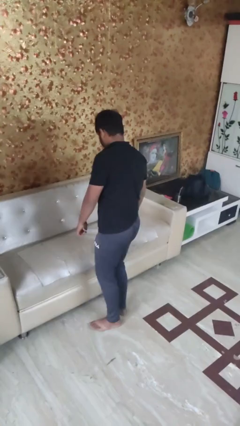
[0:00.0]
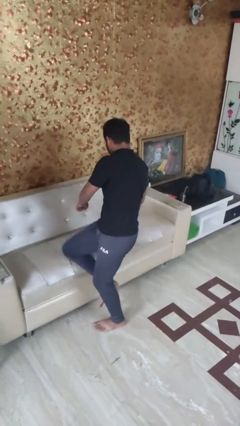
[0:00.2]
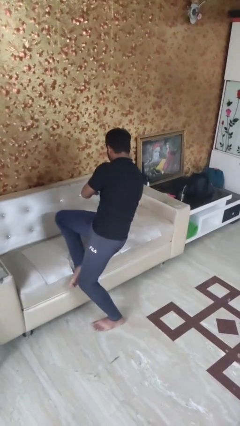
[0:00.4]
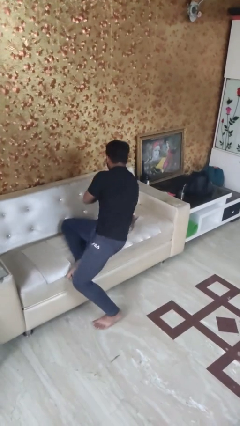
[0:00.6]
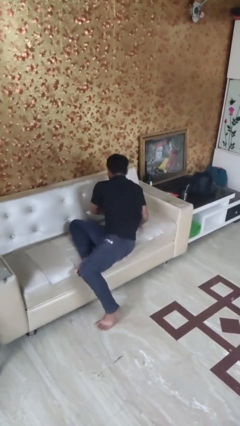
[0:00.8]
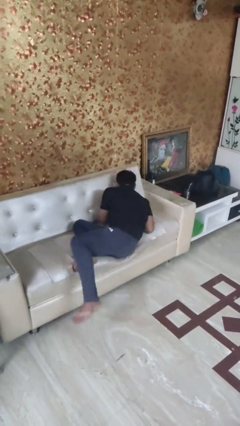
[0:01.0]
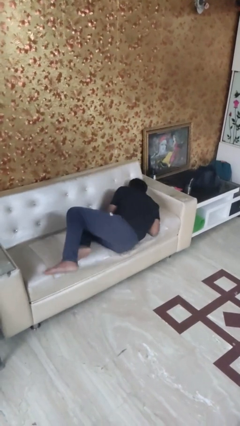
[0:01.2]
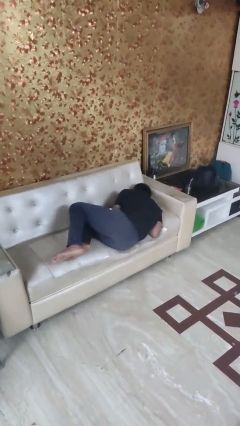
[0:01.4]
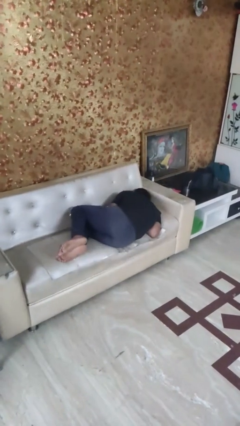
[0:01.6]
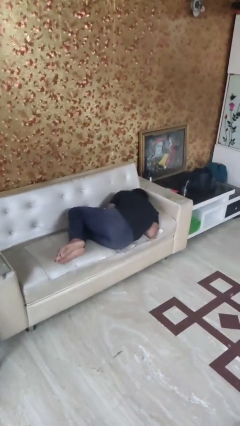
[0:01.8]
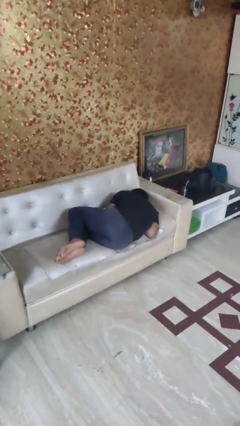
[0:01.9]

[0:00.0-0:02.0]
person lies down on couch

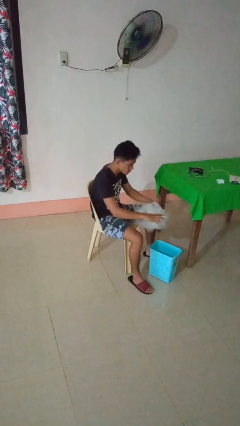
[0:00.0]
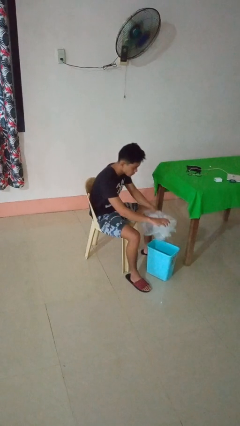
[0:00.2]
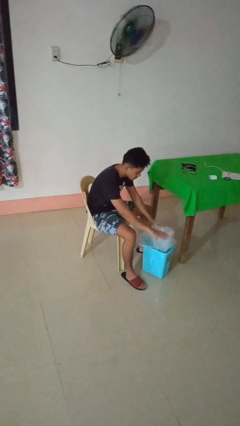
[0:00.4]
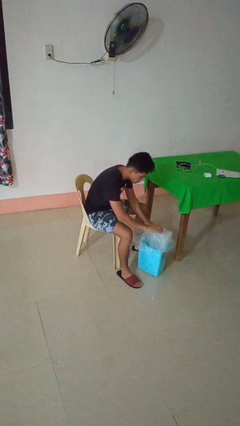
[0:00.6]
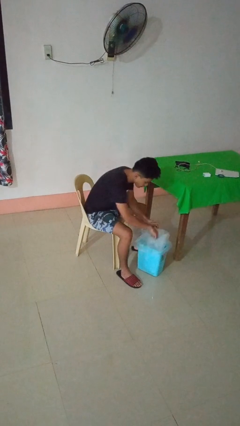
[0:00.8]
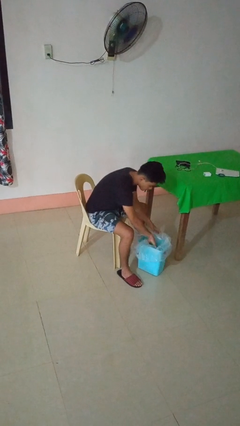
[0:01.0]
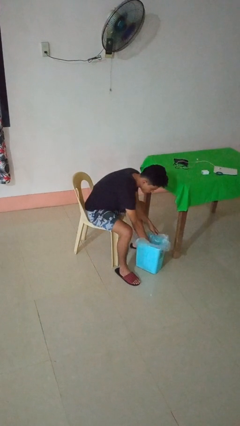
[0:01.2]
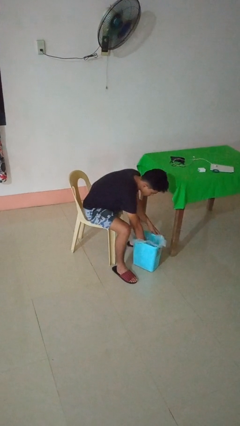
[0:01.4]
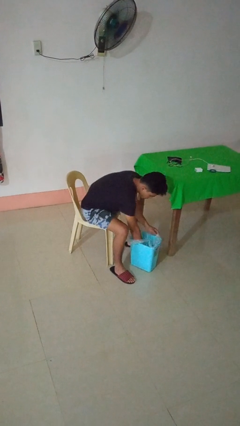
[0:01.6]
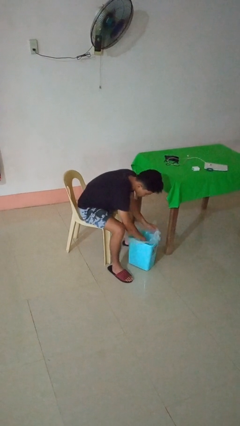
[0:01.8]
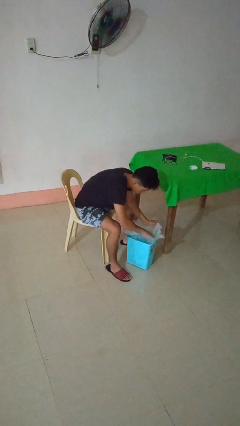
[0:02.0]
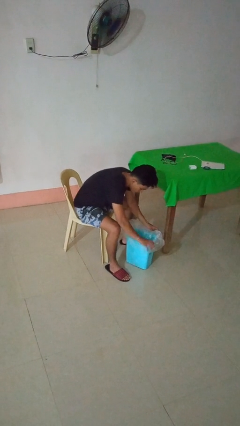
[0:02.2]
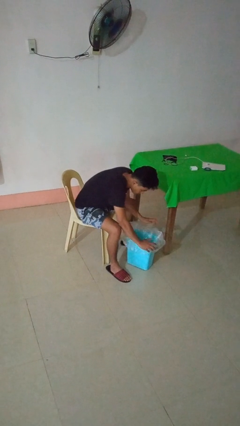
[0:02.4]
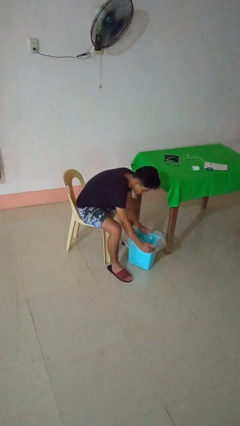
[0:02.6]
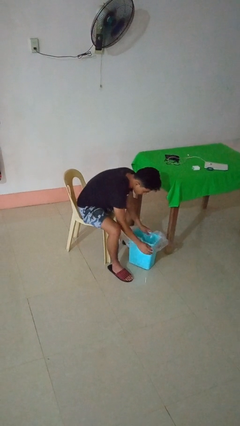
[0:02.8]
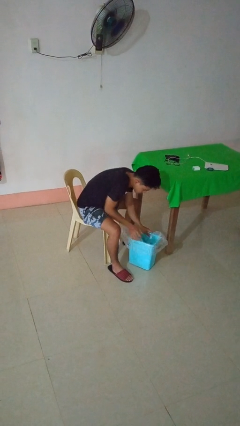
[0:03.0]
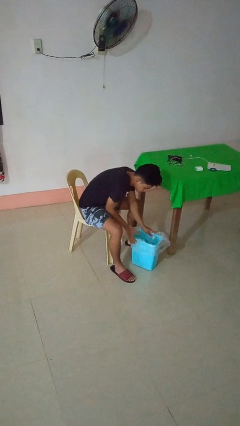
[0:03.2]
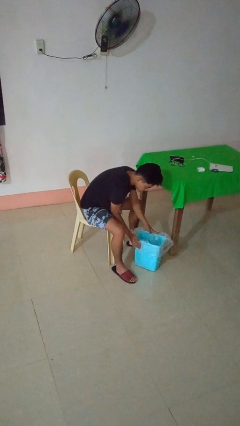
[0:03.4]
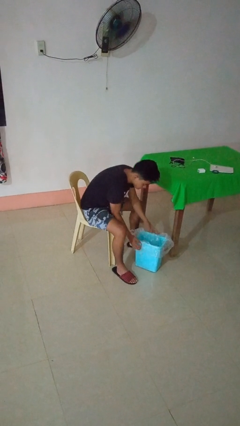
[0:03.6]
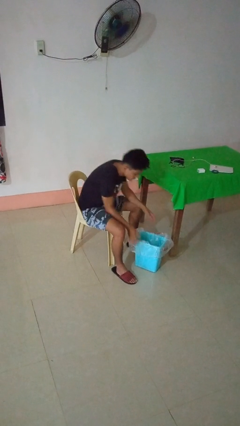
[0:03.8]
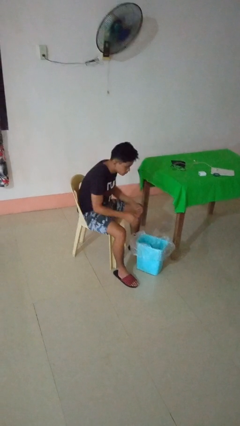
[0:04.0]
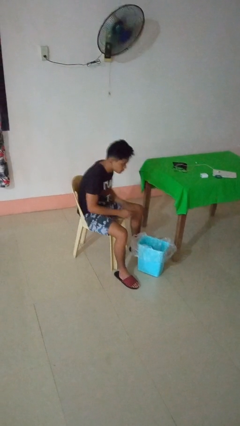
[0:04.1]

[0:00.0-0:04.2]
person inserts trashbag into trashcan

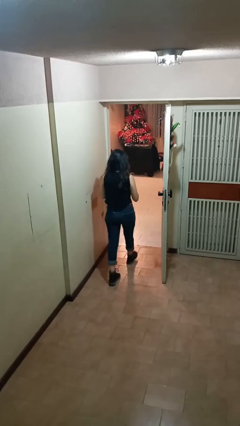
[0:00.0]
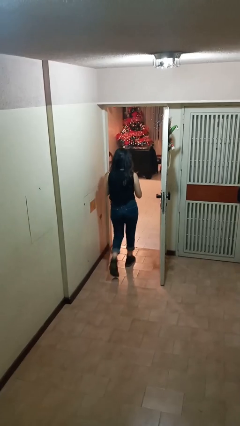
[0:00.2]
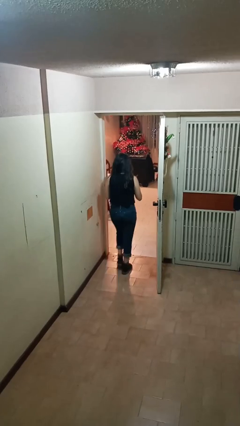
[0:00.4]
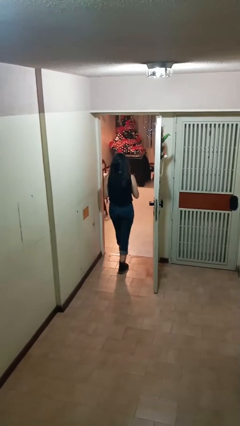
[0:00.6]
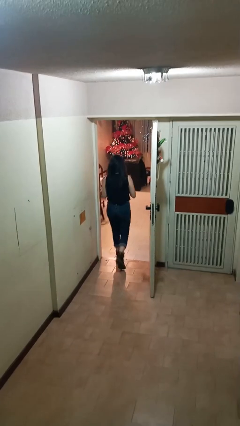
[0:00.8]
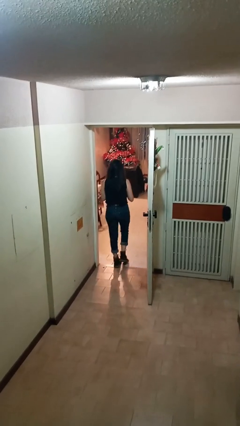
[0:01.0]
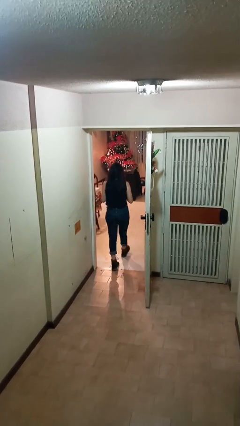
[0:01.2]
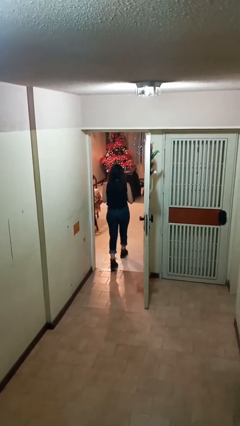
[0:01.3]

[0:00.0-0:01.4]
person exits scene through structure

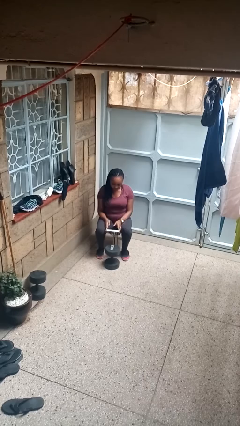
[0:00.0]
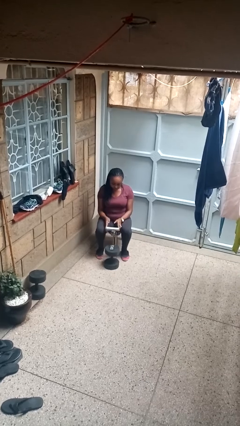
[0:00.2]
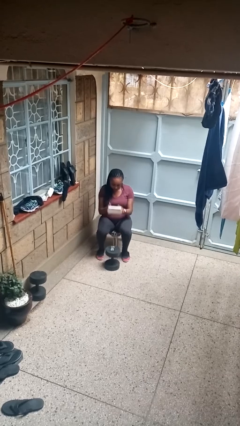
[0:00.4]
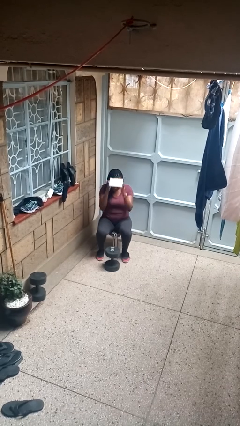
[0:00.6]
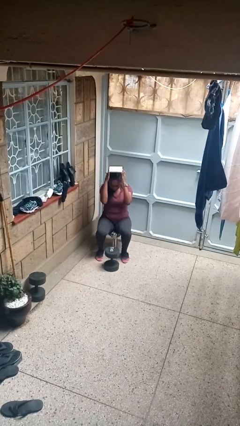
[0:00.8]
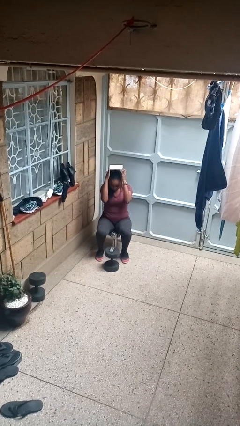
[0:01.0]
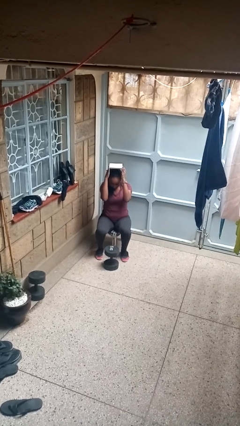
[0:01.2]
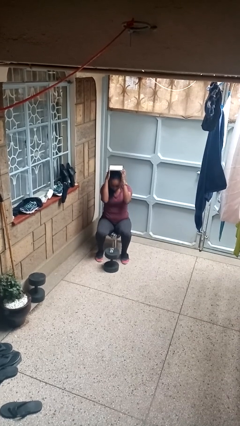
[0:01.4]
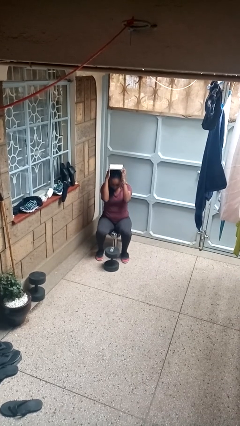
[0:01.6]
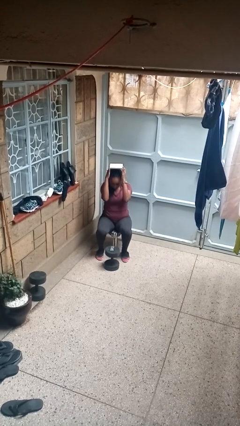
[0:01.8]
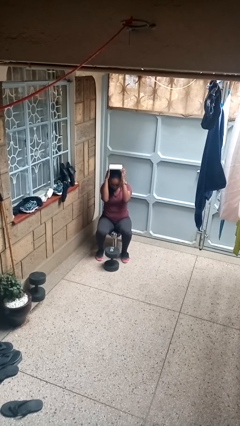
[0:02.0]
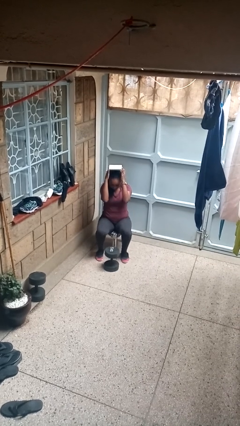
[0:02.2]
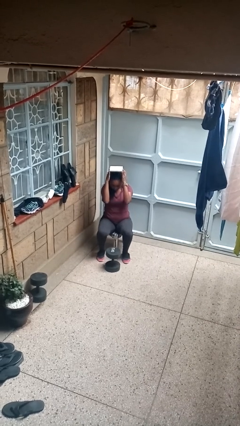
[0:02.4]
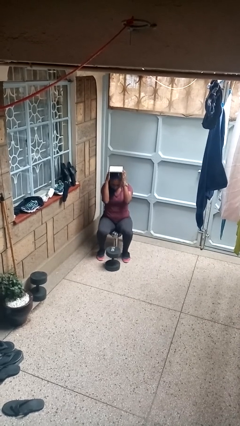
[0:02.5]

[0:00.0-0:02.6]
person holds object above head

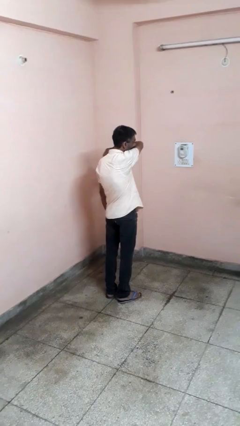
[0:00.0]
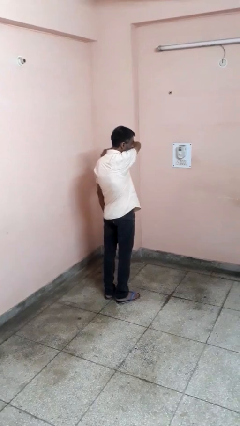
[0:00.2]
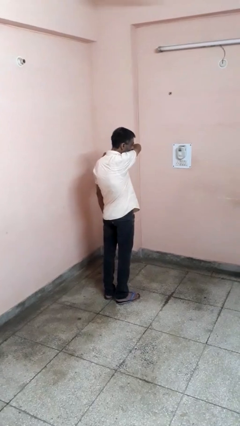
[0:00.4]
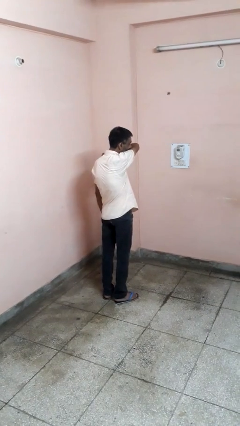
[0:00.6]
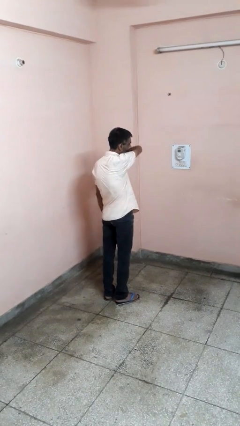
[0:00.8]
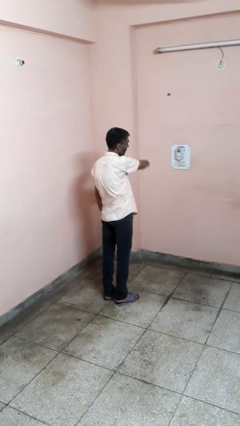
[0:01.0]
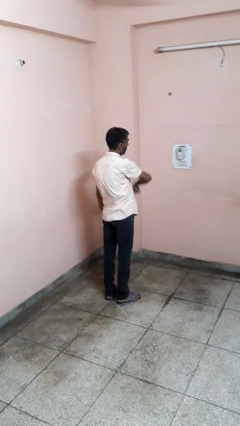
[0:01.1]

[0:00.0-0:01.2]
person sneezes into arm

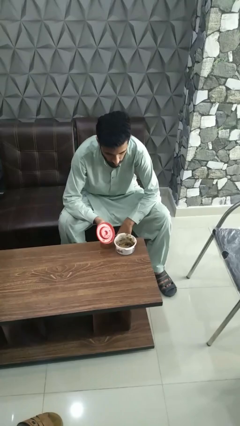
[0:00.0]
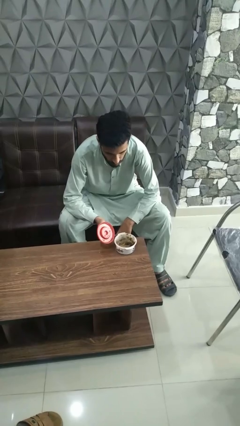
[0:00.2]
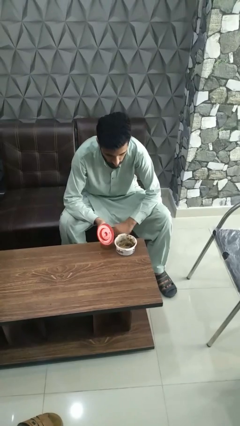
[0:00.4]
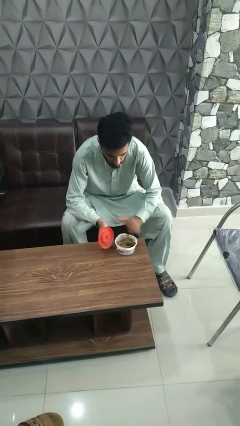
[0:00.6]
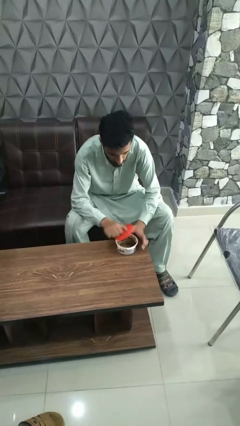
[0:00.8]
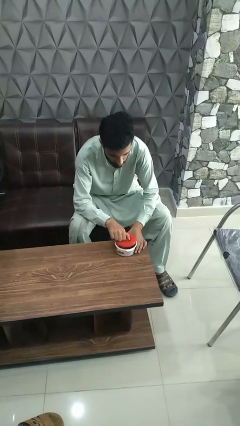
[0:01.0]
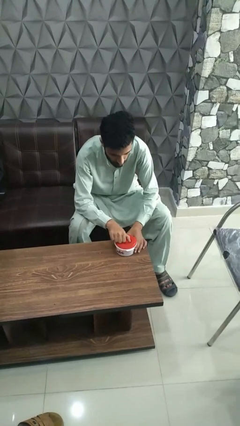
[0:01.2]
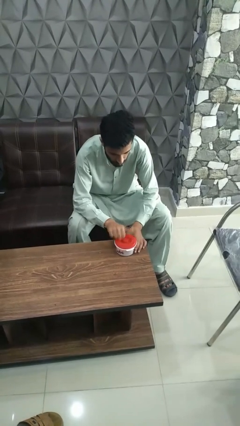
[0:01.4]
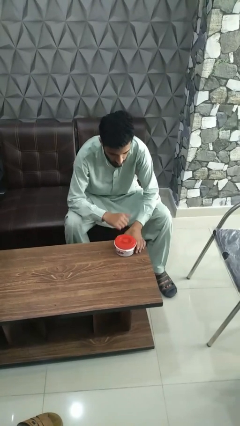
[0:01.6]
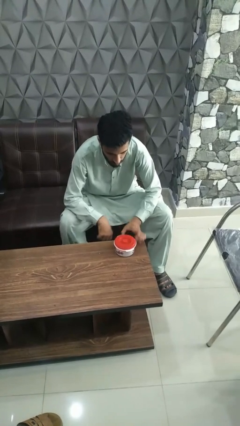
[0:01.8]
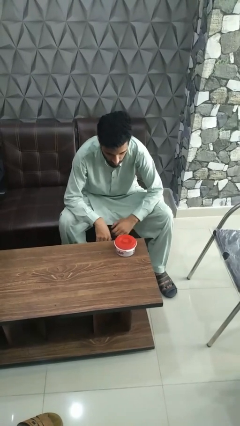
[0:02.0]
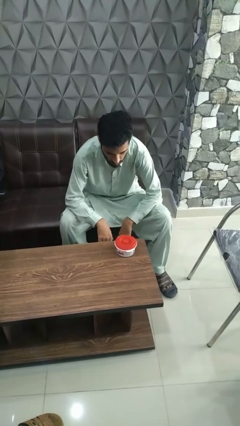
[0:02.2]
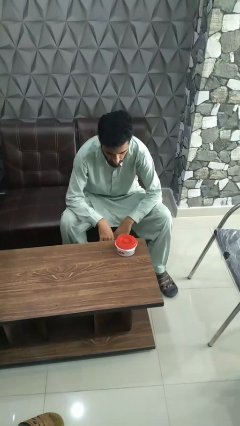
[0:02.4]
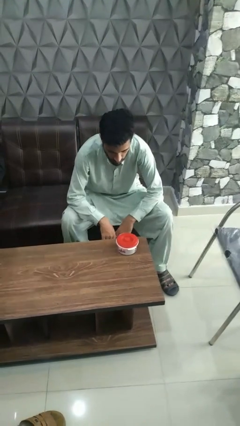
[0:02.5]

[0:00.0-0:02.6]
person closes jar

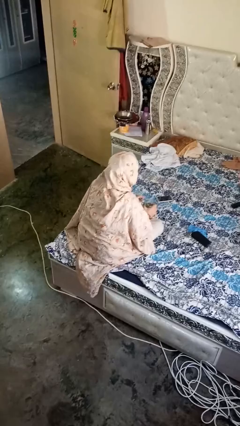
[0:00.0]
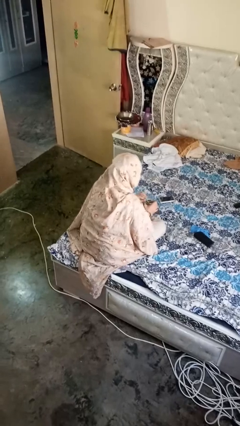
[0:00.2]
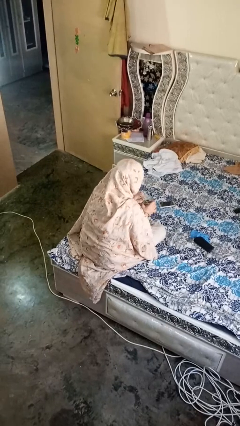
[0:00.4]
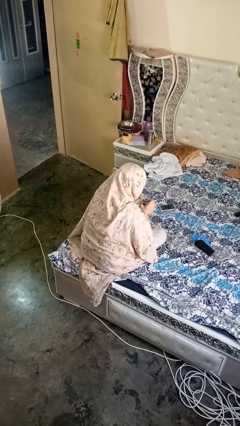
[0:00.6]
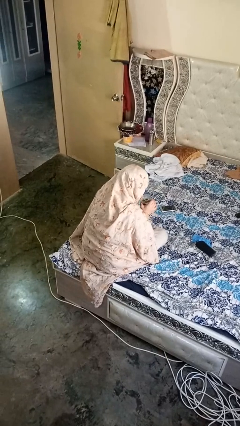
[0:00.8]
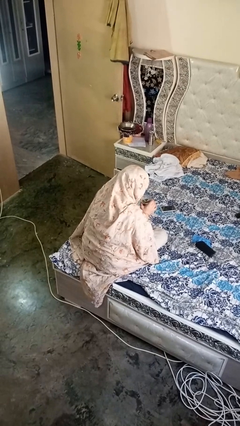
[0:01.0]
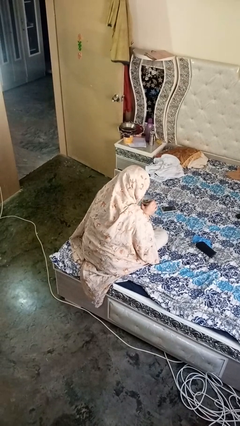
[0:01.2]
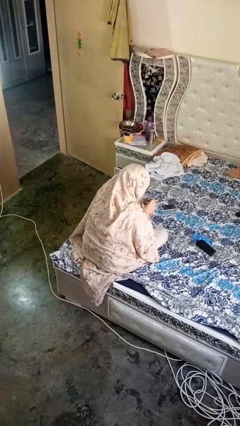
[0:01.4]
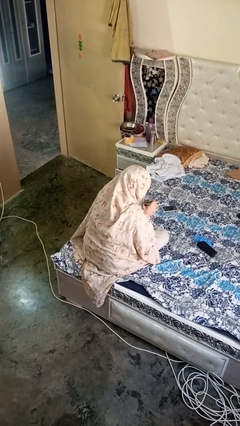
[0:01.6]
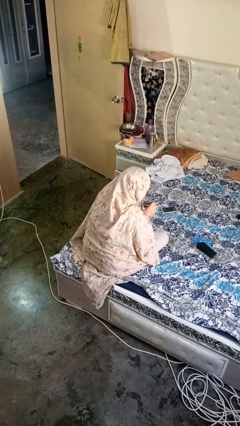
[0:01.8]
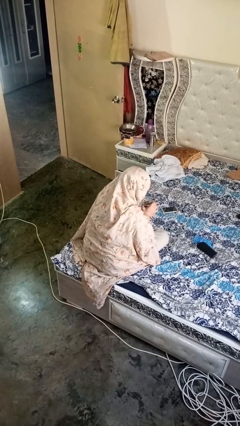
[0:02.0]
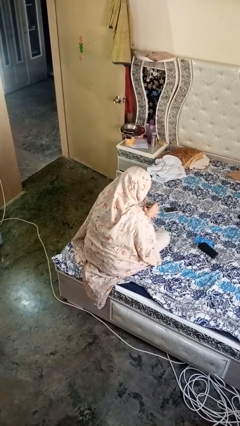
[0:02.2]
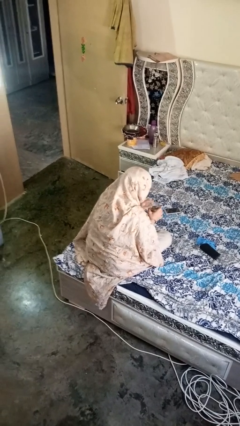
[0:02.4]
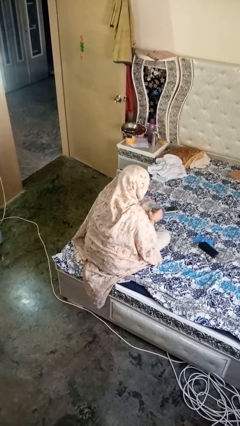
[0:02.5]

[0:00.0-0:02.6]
person drinks from straw

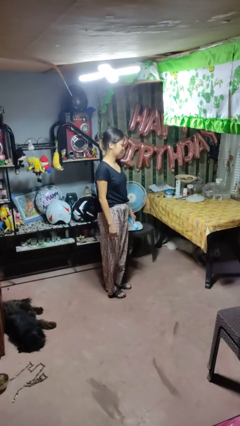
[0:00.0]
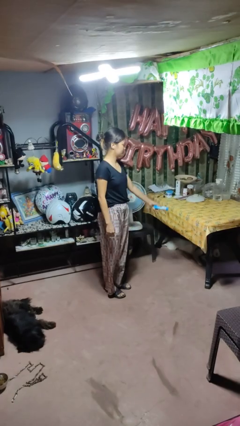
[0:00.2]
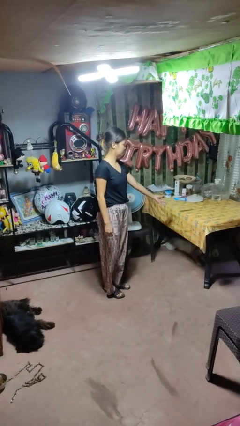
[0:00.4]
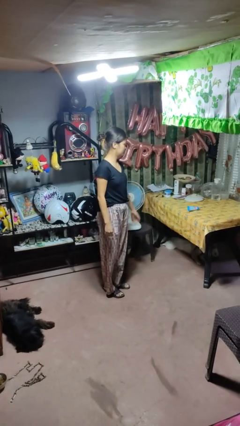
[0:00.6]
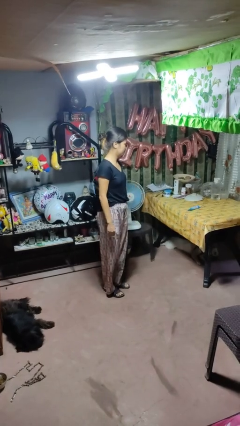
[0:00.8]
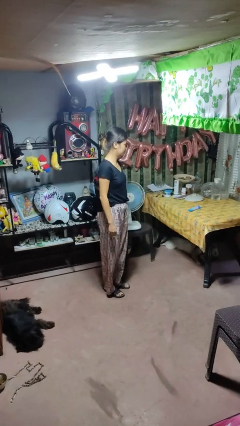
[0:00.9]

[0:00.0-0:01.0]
person throws object on table
